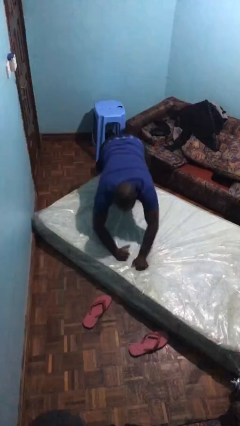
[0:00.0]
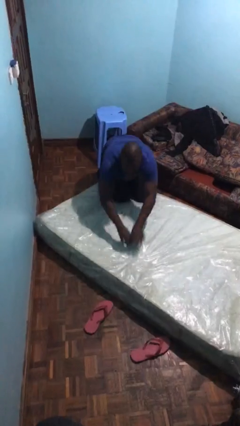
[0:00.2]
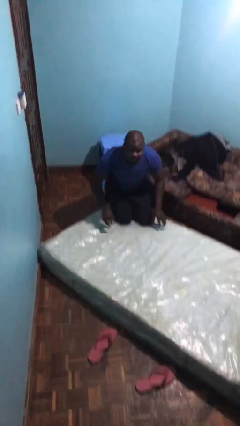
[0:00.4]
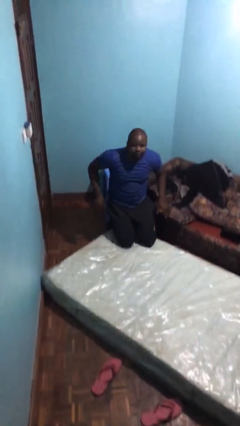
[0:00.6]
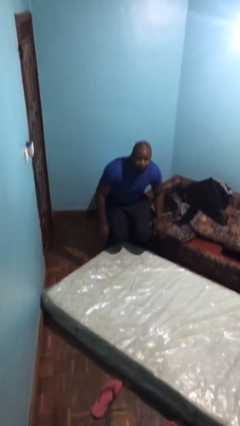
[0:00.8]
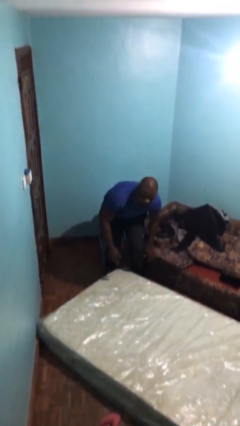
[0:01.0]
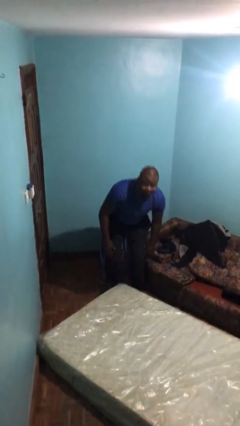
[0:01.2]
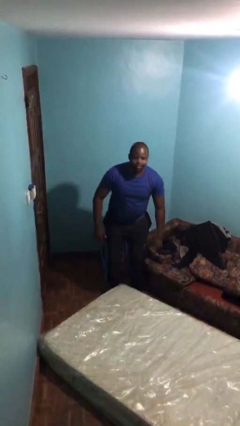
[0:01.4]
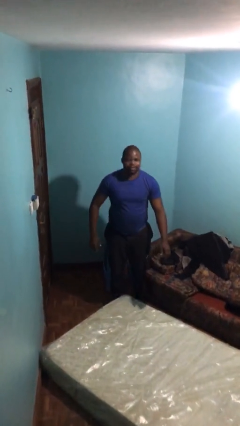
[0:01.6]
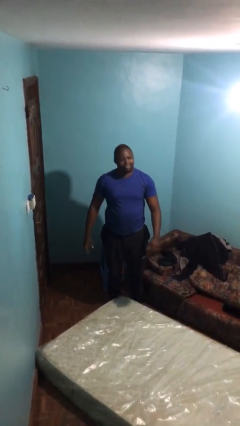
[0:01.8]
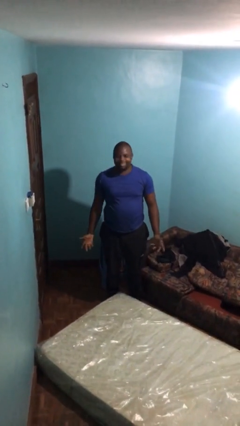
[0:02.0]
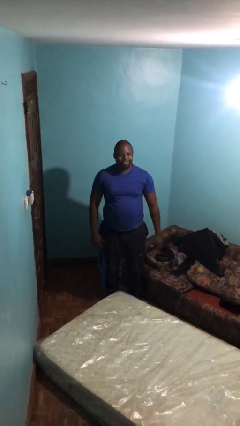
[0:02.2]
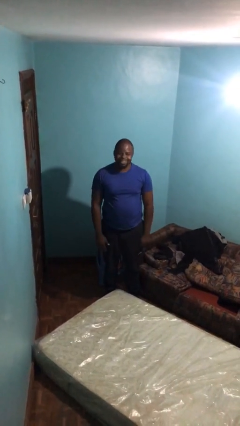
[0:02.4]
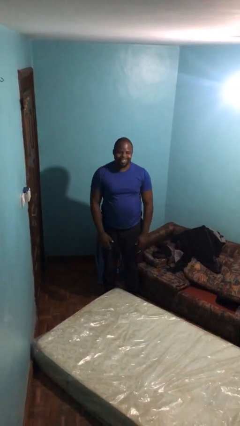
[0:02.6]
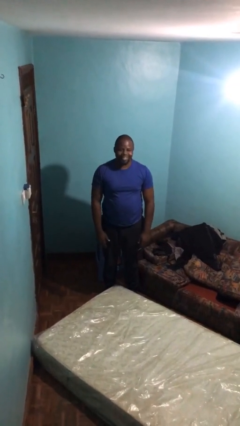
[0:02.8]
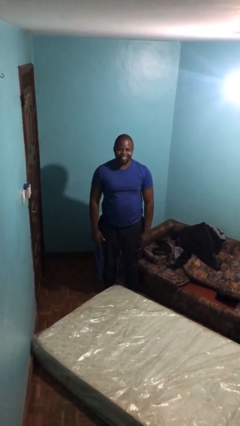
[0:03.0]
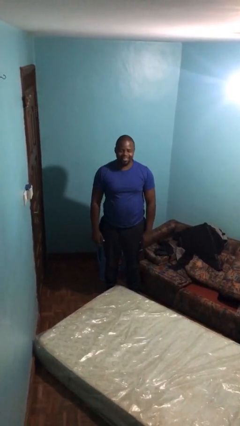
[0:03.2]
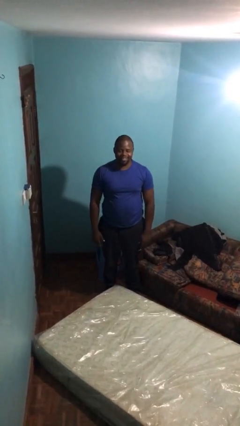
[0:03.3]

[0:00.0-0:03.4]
person stands up

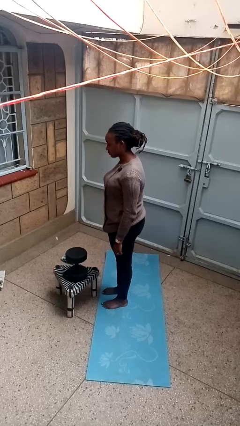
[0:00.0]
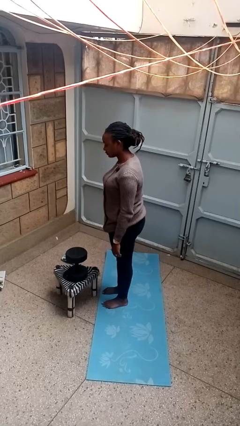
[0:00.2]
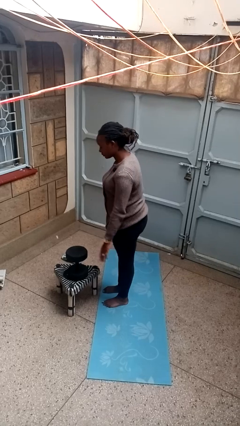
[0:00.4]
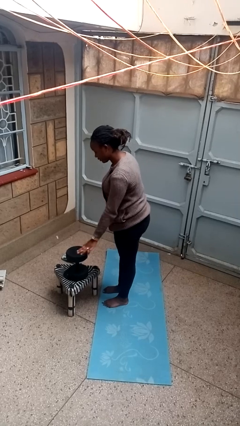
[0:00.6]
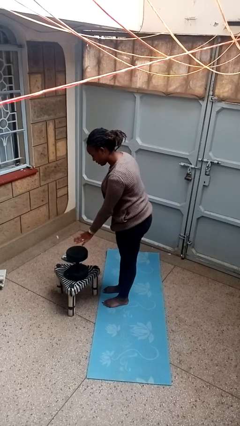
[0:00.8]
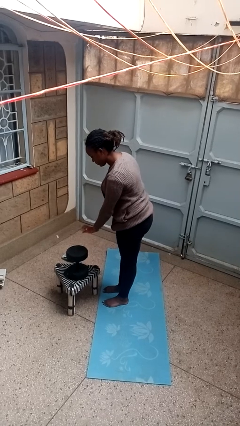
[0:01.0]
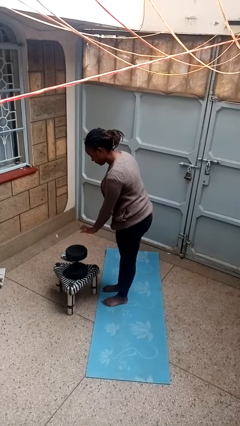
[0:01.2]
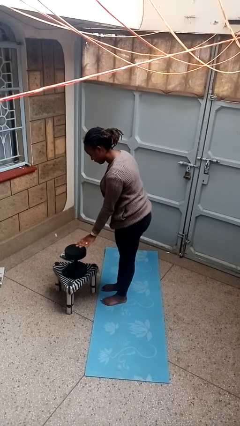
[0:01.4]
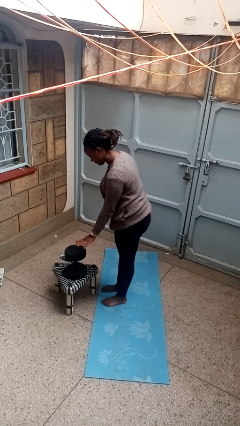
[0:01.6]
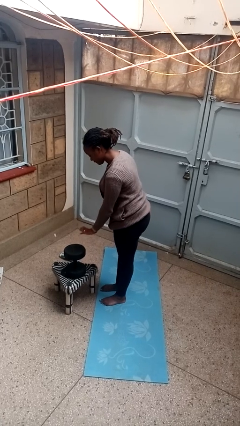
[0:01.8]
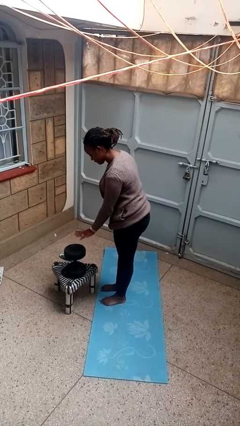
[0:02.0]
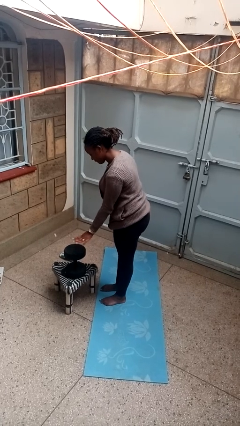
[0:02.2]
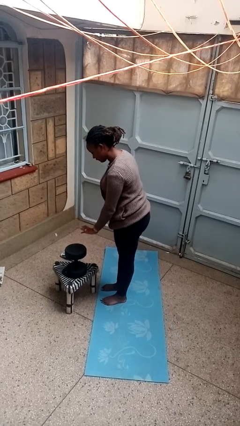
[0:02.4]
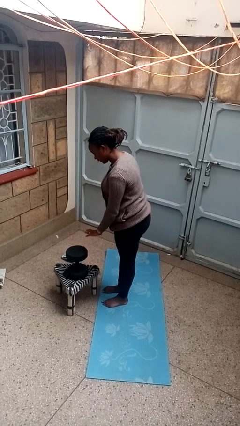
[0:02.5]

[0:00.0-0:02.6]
person waves hand over object

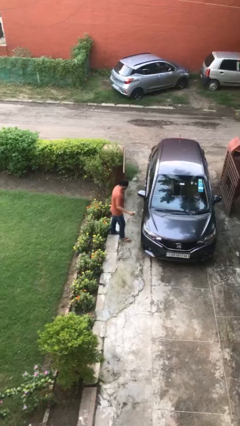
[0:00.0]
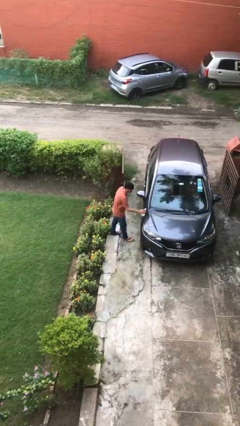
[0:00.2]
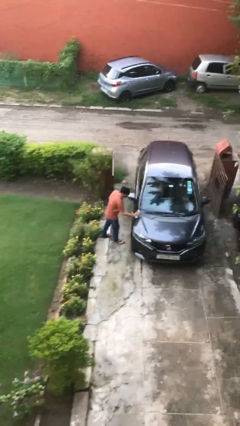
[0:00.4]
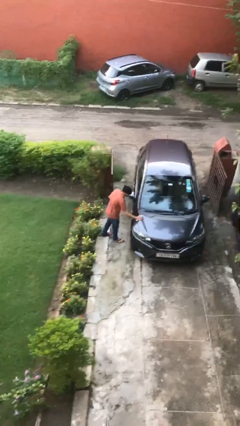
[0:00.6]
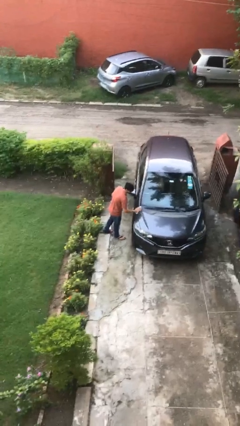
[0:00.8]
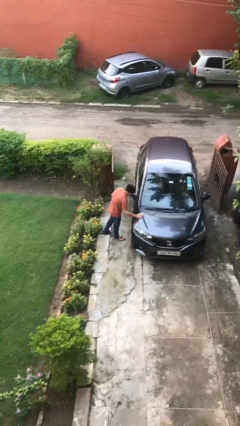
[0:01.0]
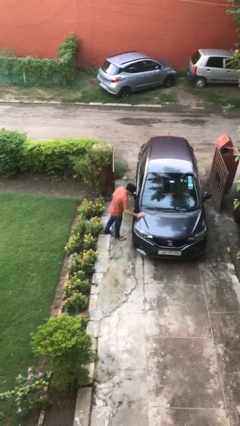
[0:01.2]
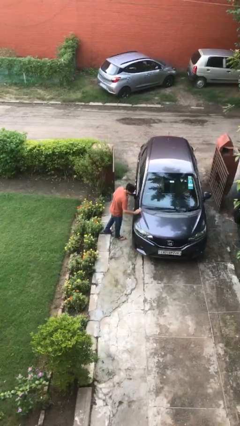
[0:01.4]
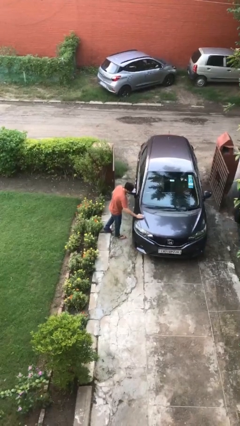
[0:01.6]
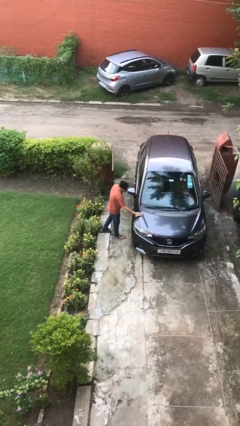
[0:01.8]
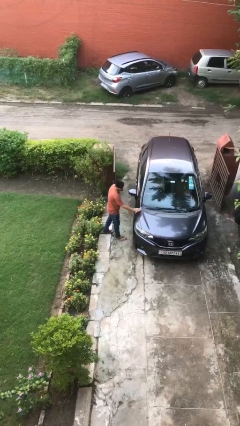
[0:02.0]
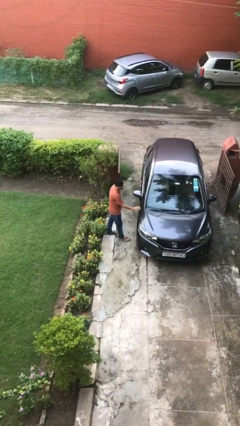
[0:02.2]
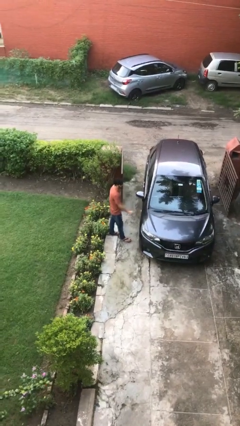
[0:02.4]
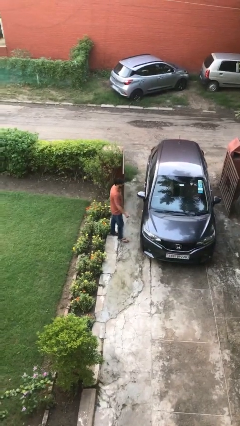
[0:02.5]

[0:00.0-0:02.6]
person polishes car with rag

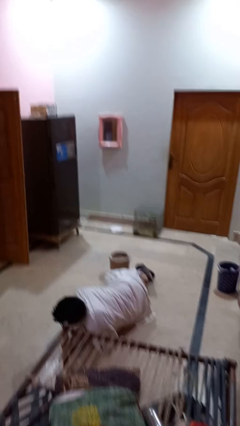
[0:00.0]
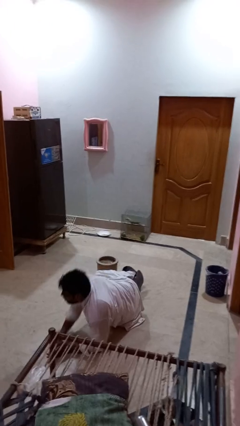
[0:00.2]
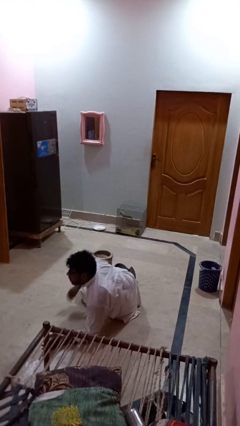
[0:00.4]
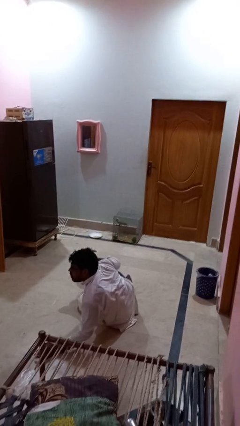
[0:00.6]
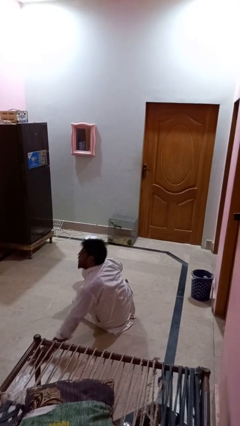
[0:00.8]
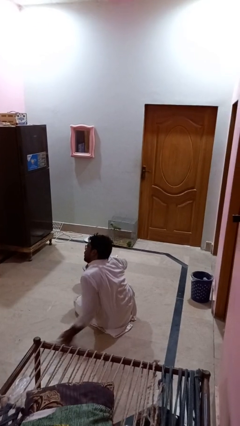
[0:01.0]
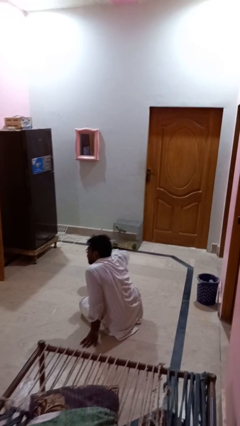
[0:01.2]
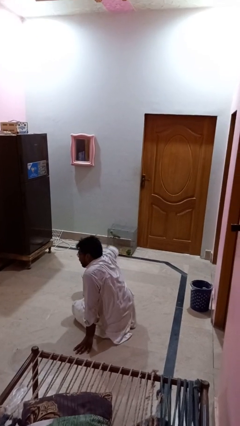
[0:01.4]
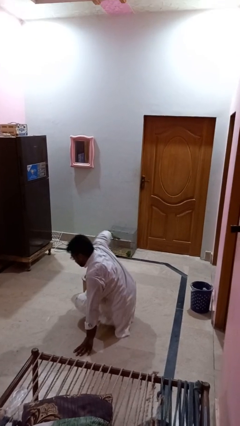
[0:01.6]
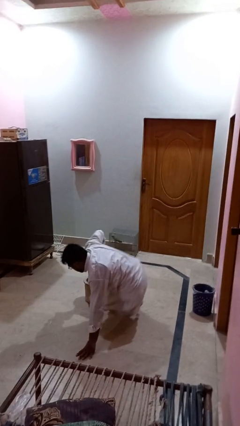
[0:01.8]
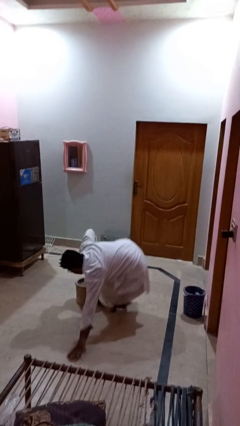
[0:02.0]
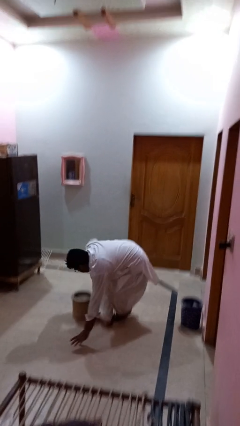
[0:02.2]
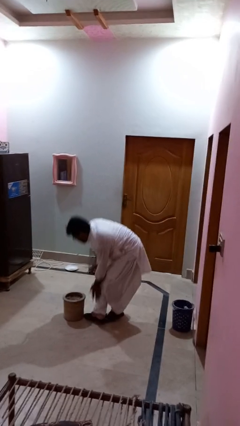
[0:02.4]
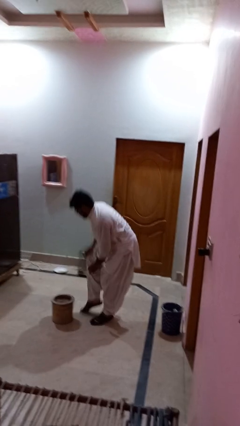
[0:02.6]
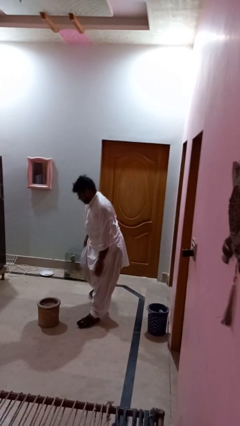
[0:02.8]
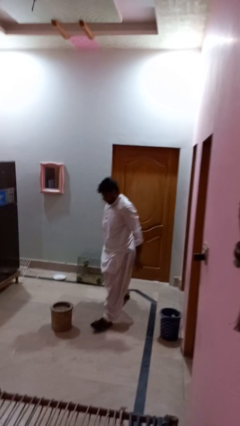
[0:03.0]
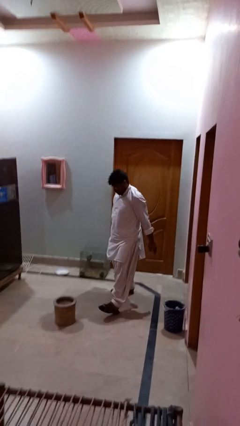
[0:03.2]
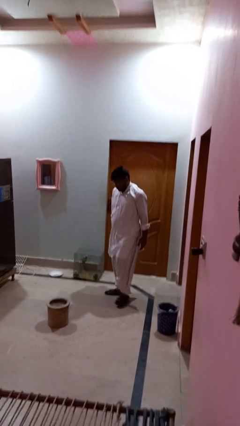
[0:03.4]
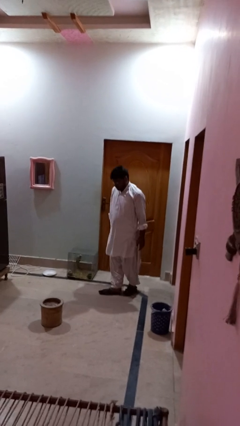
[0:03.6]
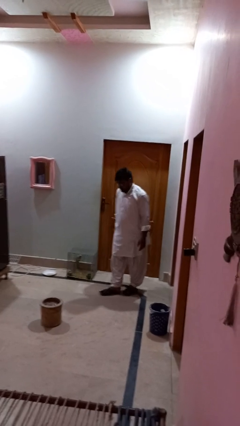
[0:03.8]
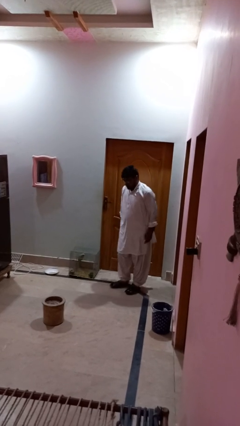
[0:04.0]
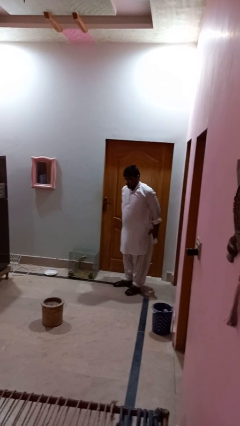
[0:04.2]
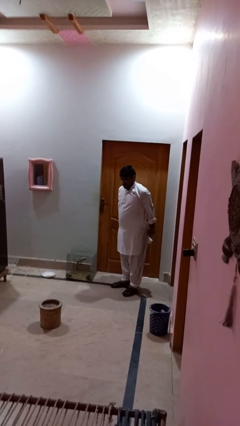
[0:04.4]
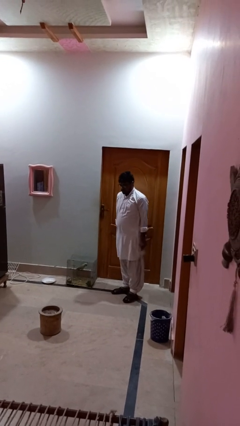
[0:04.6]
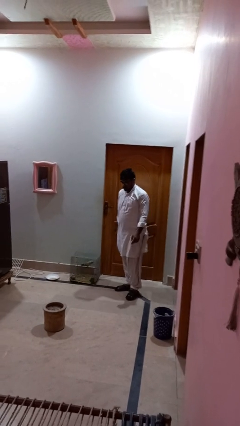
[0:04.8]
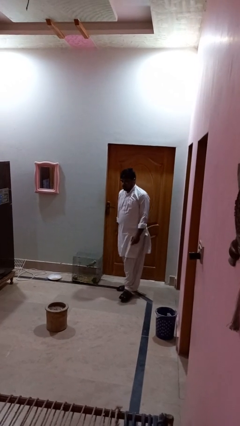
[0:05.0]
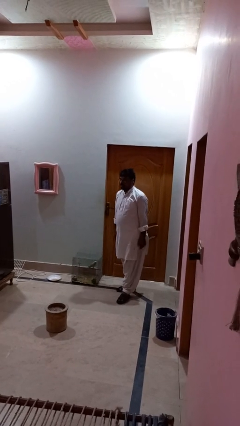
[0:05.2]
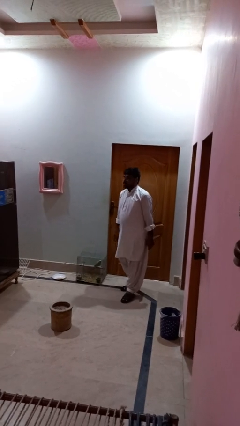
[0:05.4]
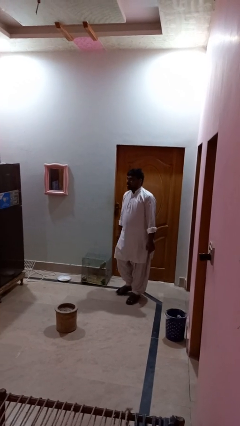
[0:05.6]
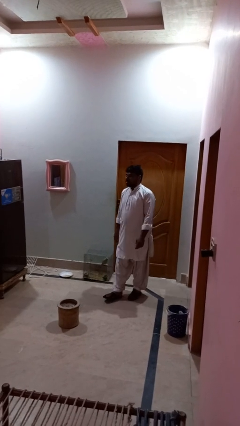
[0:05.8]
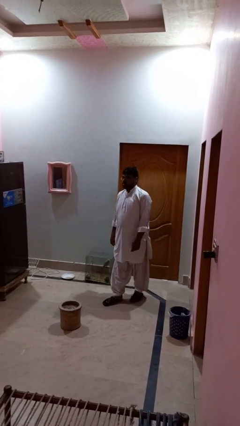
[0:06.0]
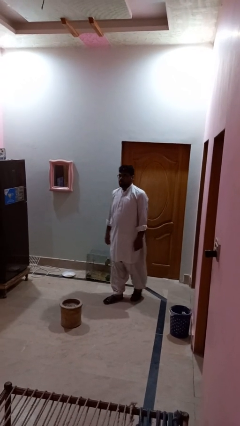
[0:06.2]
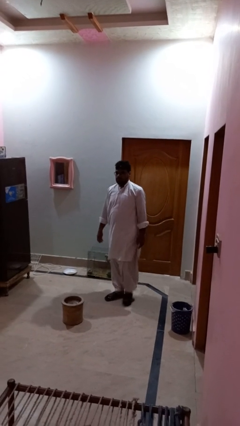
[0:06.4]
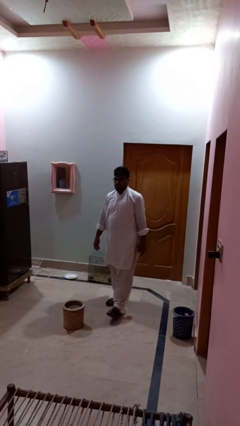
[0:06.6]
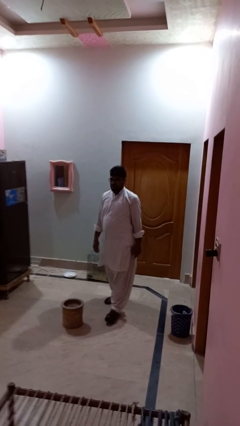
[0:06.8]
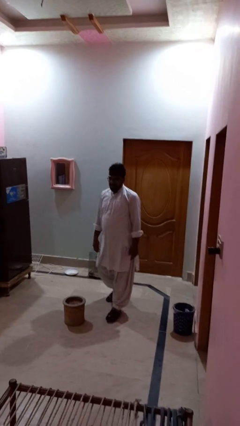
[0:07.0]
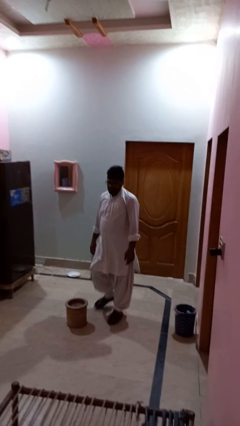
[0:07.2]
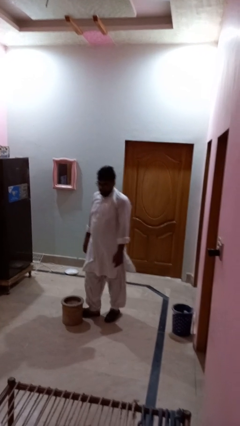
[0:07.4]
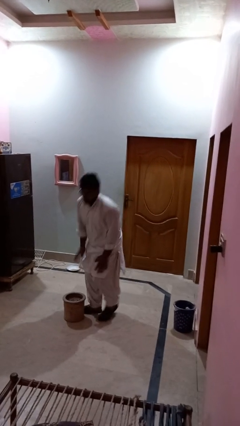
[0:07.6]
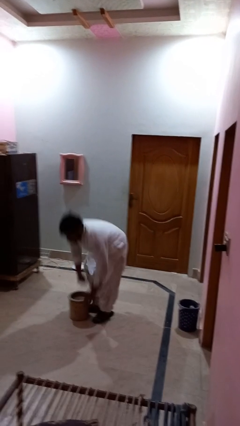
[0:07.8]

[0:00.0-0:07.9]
person stands up from floor

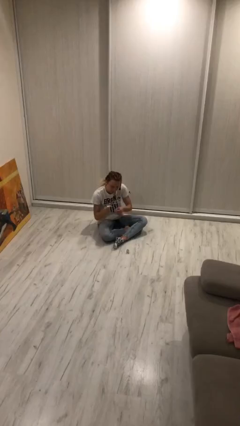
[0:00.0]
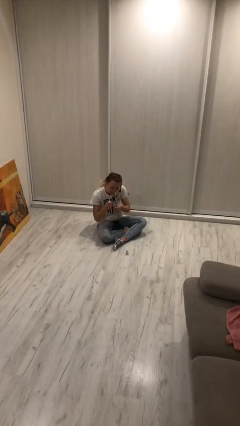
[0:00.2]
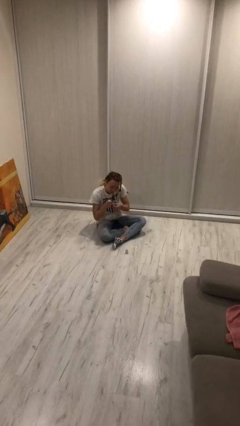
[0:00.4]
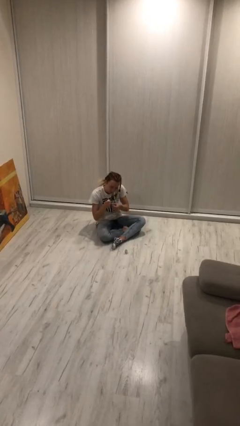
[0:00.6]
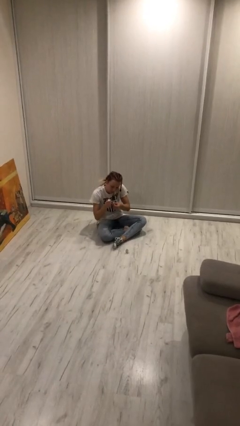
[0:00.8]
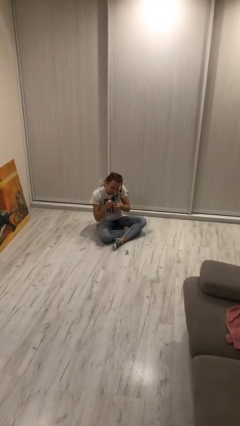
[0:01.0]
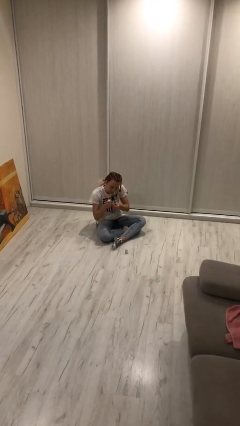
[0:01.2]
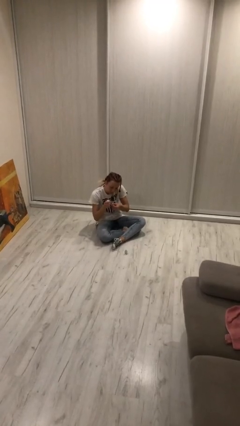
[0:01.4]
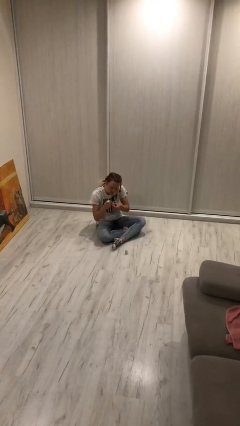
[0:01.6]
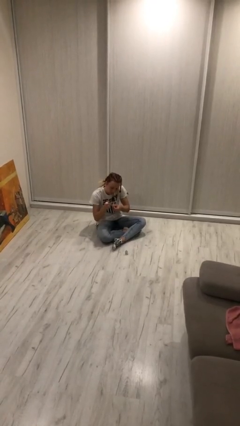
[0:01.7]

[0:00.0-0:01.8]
person paints fingernails
